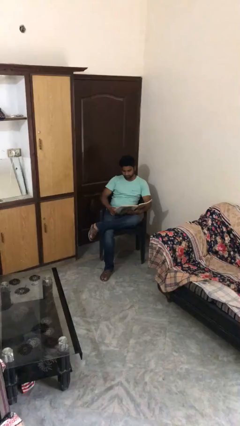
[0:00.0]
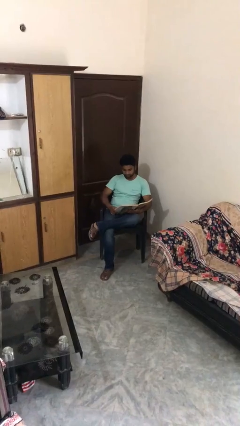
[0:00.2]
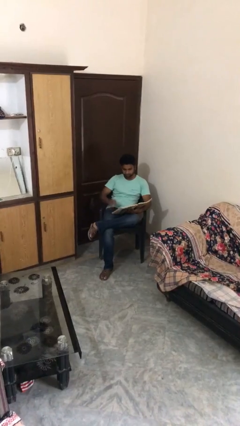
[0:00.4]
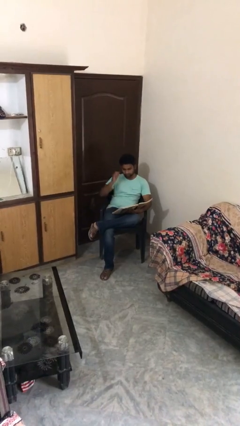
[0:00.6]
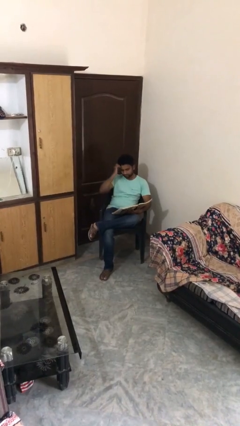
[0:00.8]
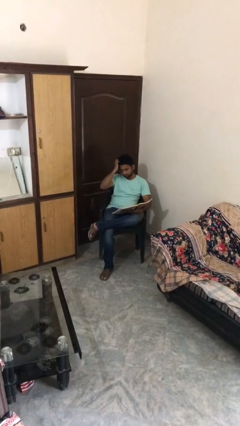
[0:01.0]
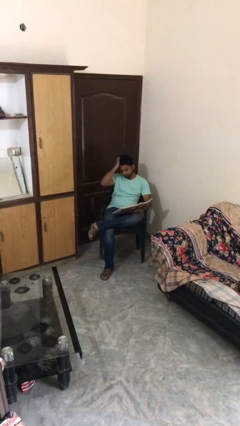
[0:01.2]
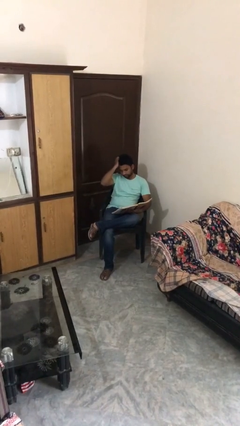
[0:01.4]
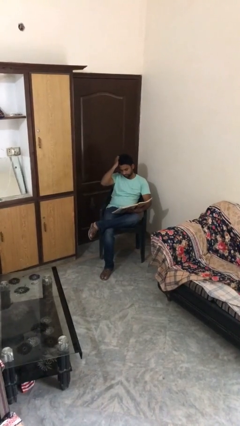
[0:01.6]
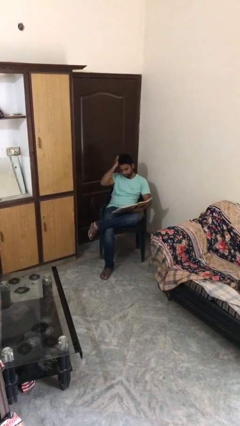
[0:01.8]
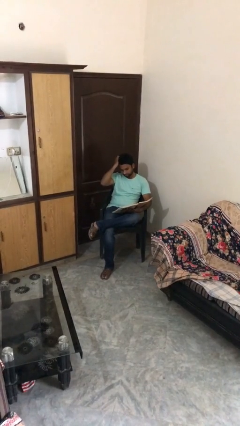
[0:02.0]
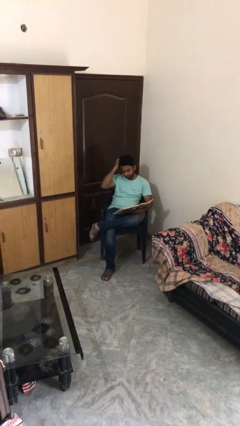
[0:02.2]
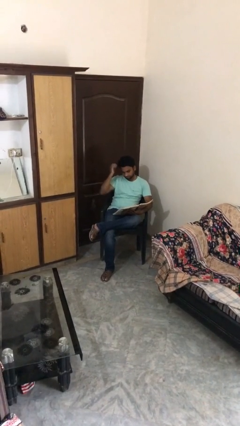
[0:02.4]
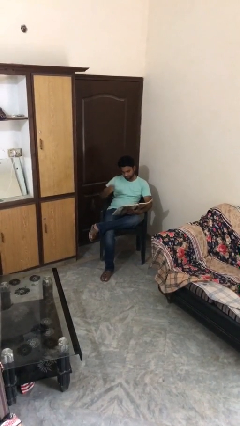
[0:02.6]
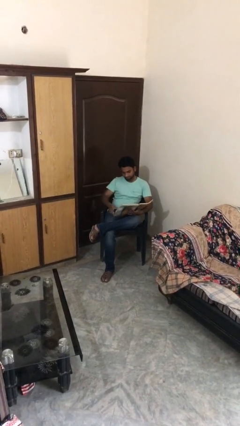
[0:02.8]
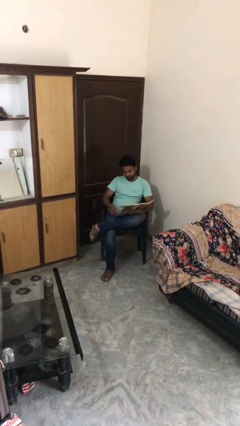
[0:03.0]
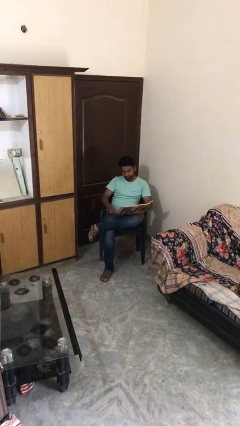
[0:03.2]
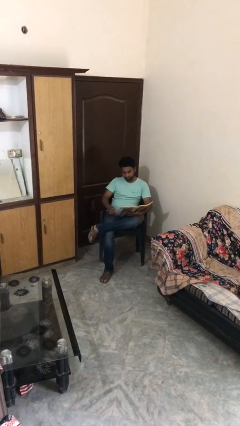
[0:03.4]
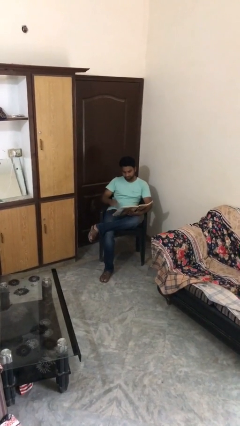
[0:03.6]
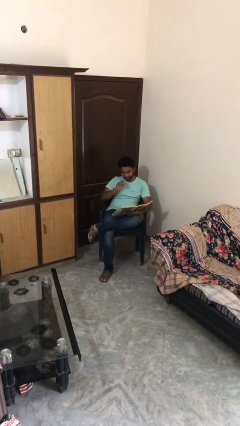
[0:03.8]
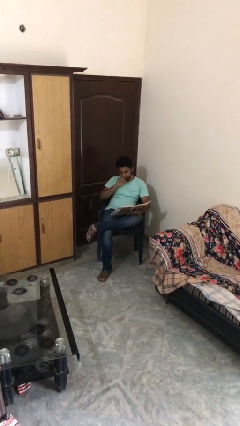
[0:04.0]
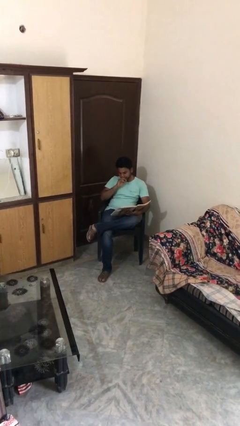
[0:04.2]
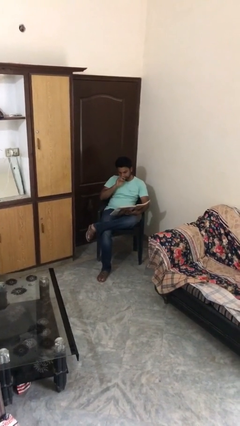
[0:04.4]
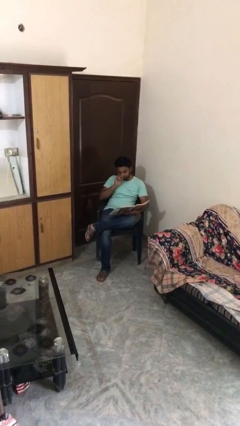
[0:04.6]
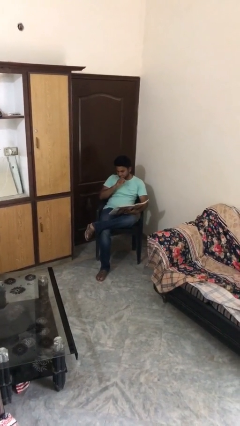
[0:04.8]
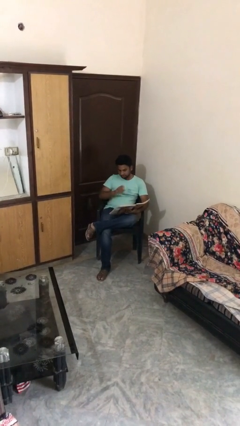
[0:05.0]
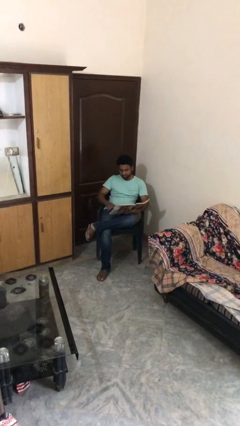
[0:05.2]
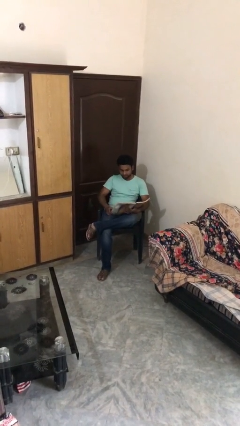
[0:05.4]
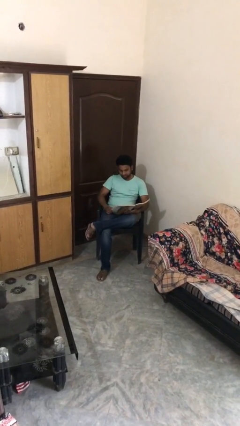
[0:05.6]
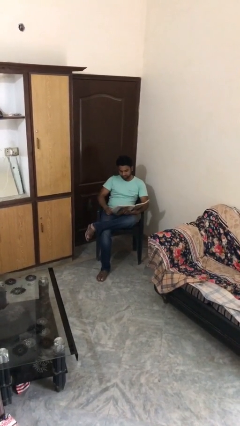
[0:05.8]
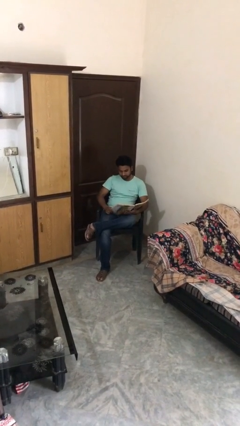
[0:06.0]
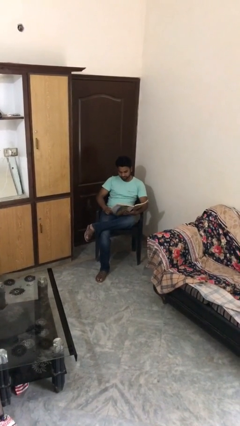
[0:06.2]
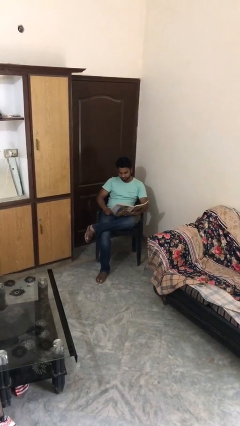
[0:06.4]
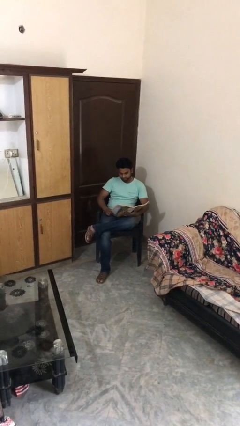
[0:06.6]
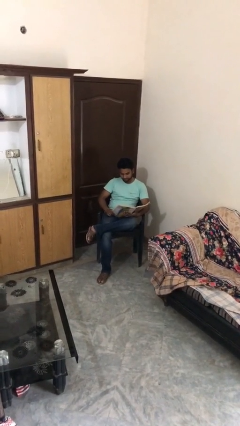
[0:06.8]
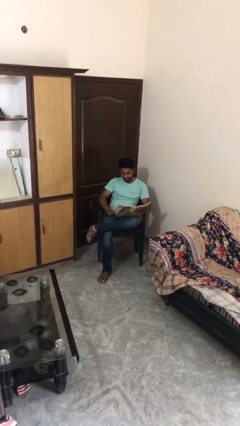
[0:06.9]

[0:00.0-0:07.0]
person reads document

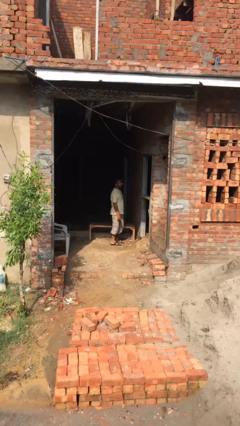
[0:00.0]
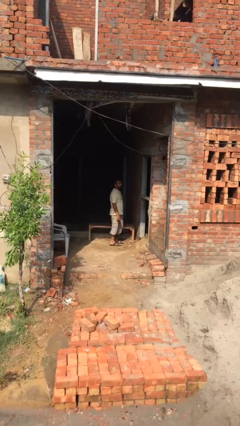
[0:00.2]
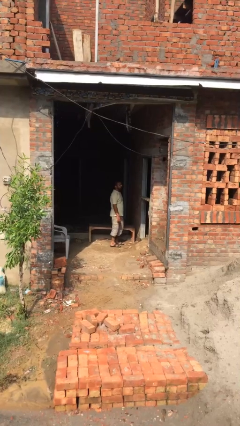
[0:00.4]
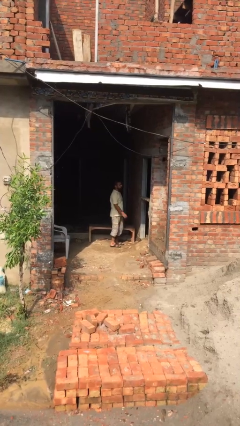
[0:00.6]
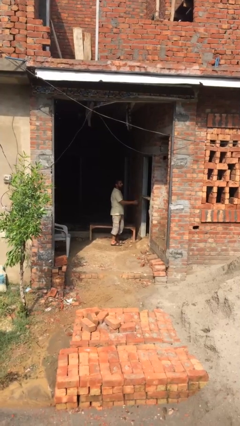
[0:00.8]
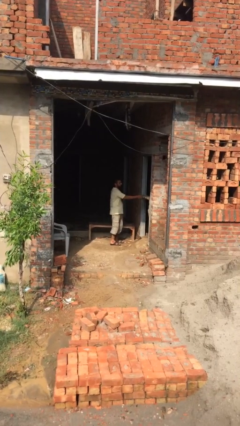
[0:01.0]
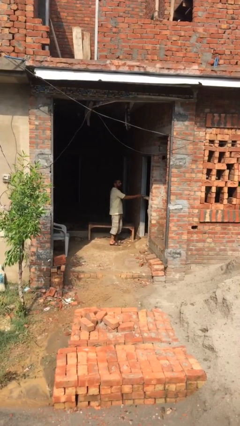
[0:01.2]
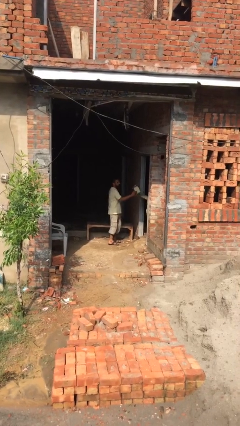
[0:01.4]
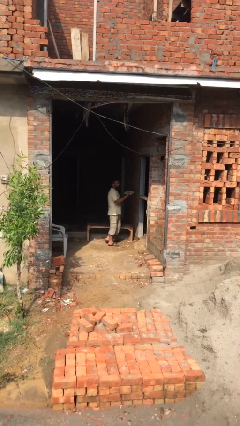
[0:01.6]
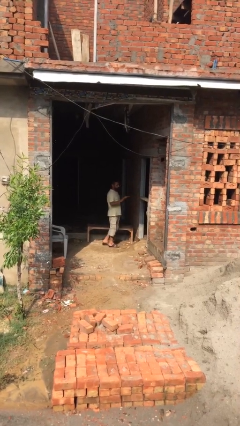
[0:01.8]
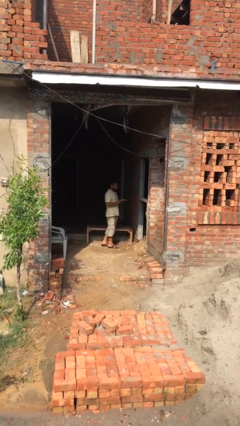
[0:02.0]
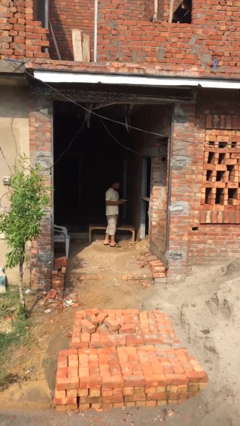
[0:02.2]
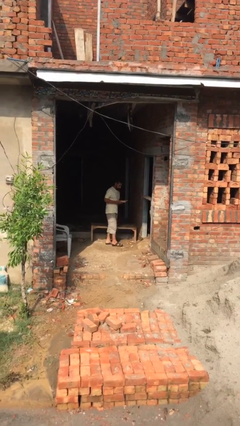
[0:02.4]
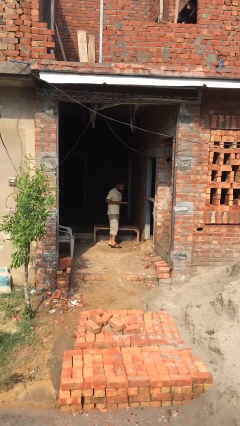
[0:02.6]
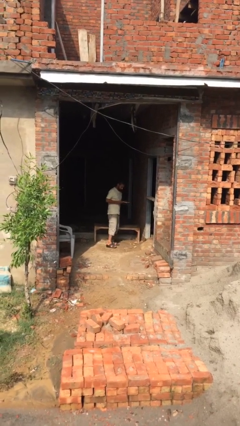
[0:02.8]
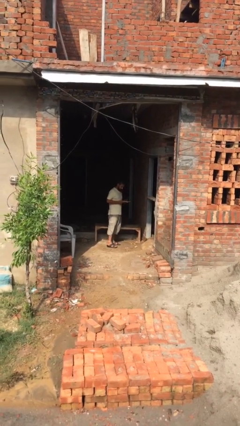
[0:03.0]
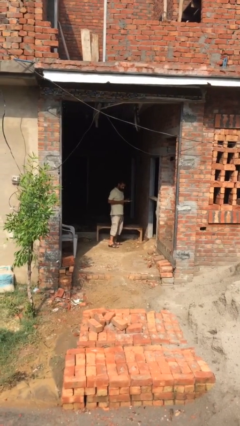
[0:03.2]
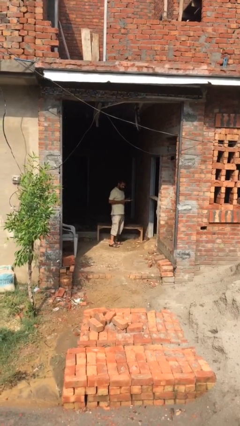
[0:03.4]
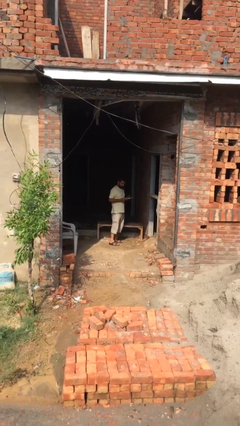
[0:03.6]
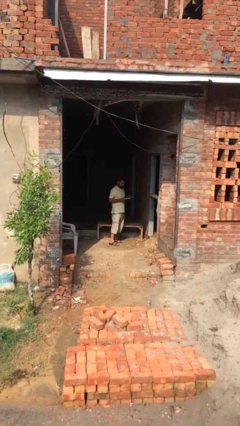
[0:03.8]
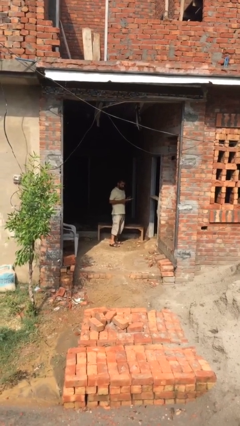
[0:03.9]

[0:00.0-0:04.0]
person picks up object from shelf

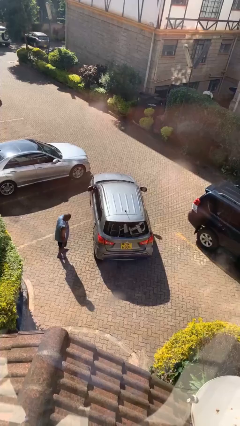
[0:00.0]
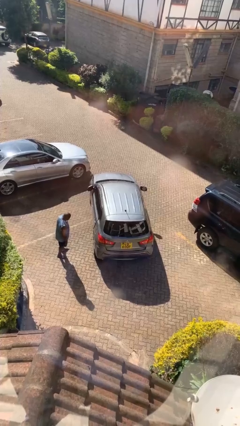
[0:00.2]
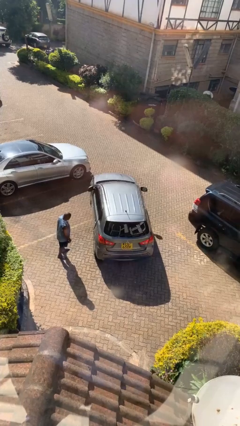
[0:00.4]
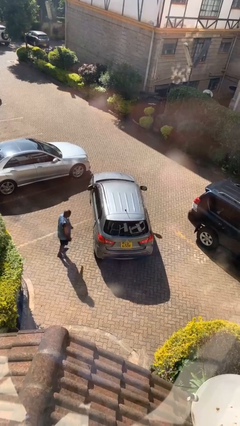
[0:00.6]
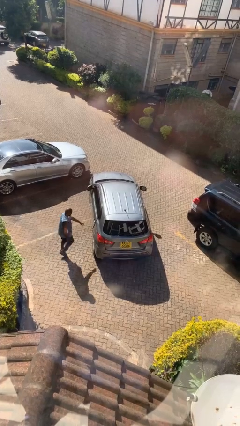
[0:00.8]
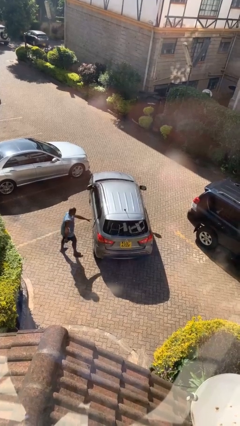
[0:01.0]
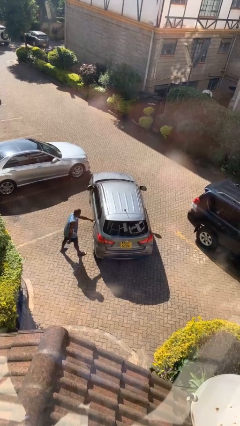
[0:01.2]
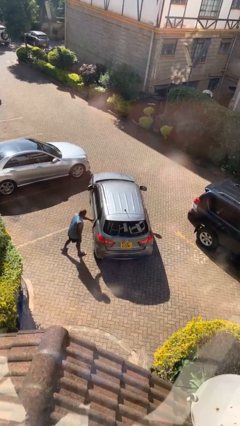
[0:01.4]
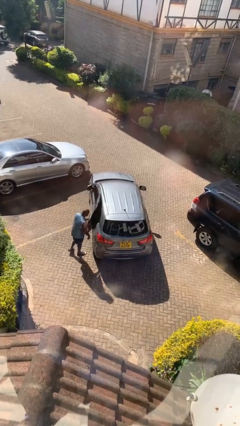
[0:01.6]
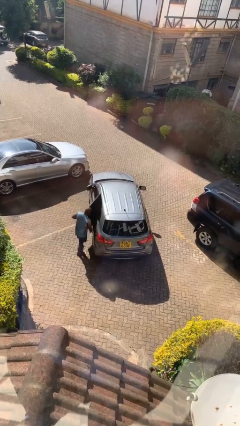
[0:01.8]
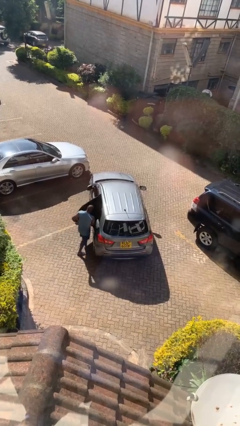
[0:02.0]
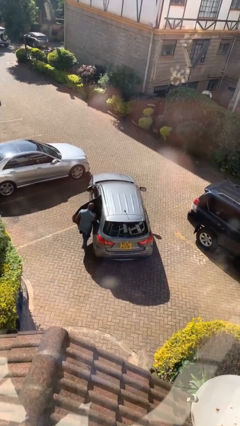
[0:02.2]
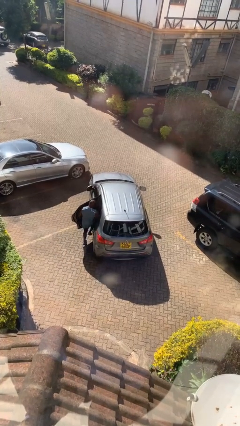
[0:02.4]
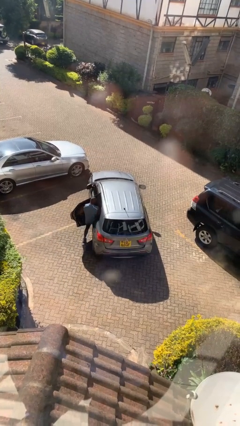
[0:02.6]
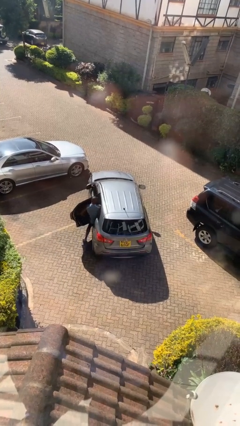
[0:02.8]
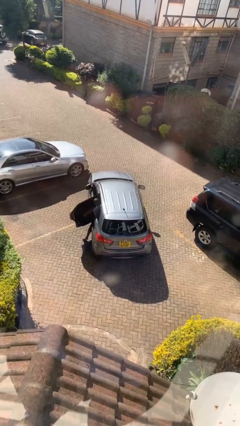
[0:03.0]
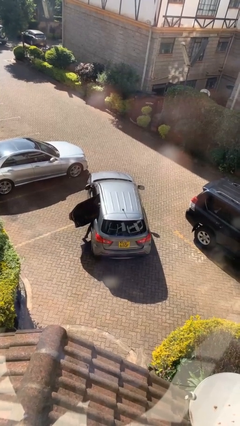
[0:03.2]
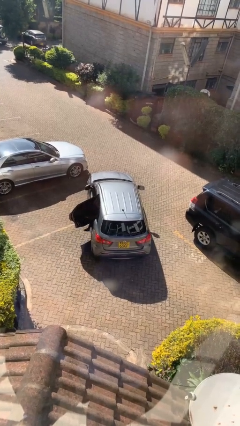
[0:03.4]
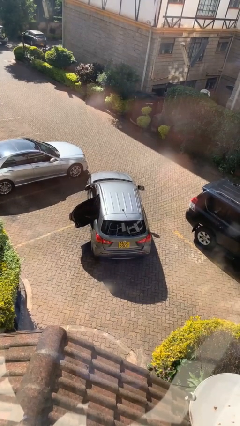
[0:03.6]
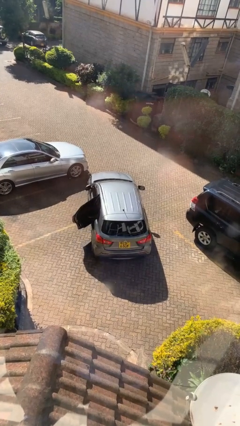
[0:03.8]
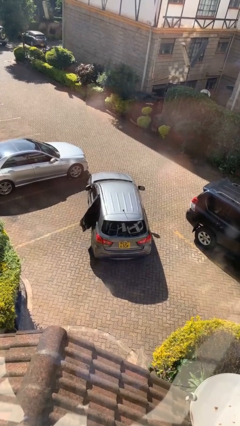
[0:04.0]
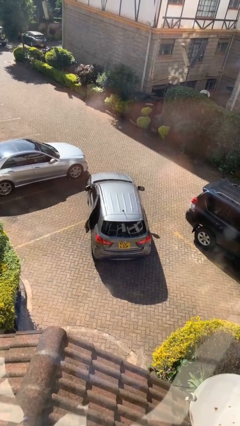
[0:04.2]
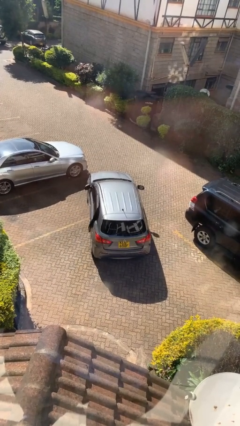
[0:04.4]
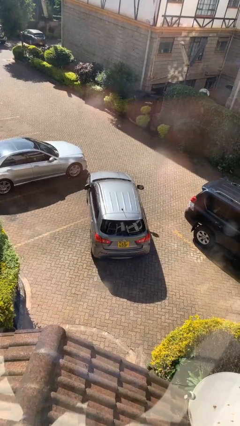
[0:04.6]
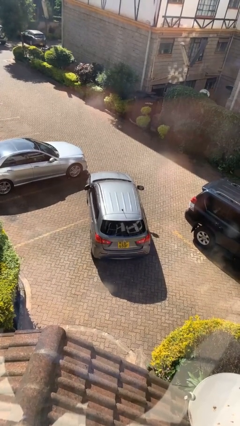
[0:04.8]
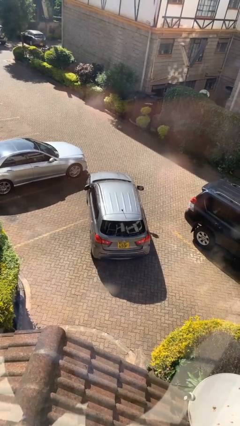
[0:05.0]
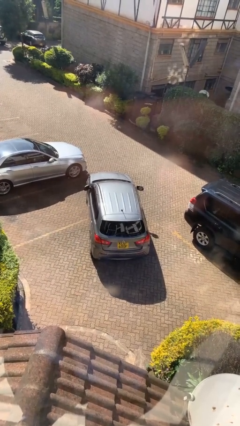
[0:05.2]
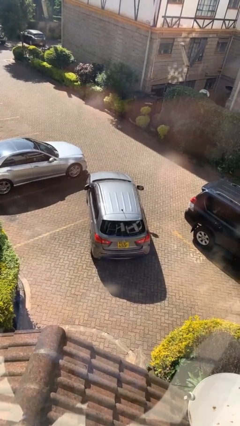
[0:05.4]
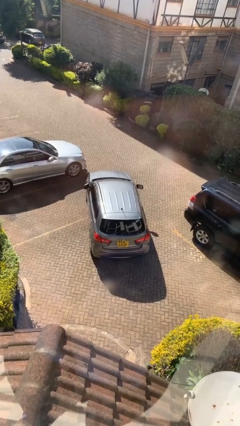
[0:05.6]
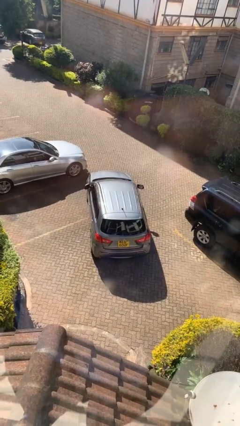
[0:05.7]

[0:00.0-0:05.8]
car picks up person

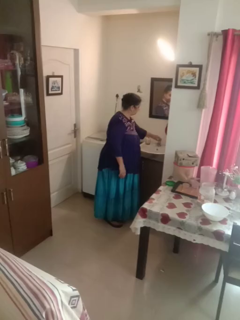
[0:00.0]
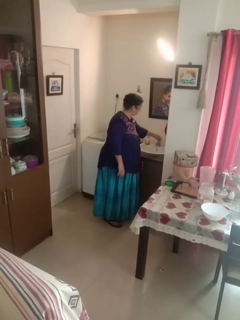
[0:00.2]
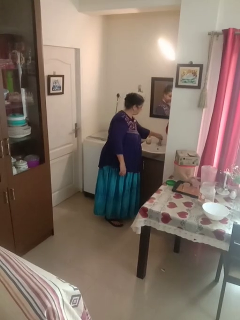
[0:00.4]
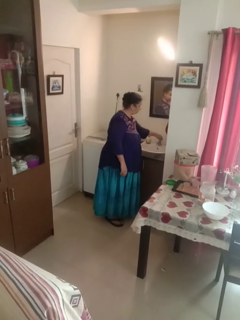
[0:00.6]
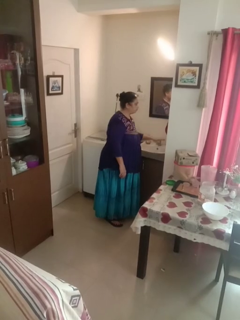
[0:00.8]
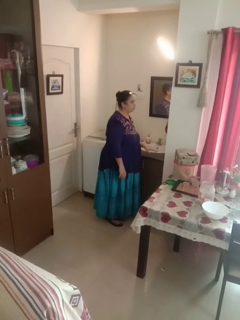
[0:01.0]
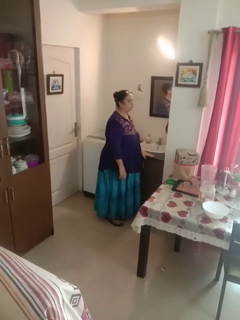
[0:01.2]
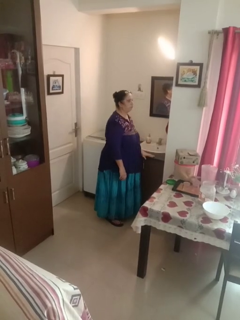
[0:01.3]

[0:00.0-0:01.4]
person turns on faucet
